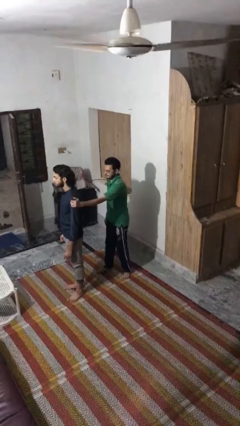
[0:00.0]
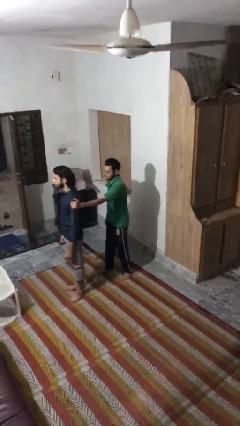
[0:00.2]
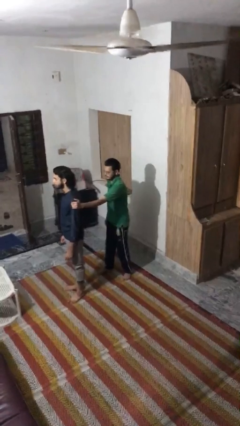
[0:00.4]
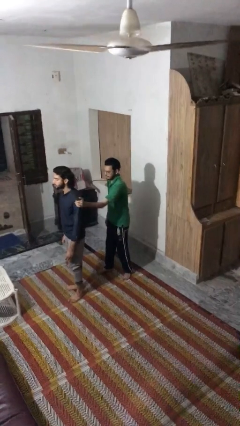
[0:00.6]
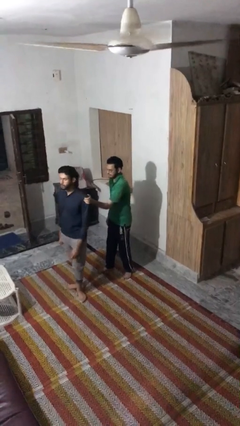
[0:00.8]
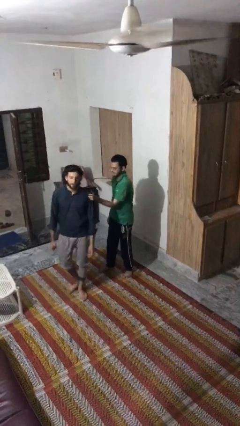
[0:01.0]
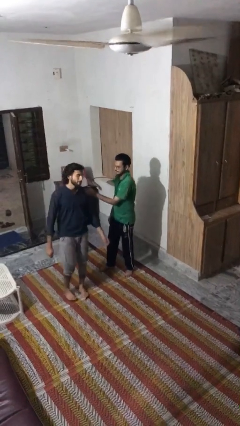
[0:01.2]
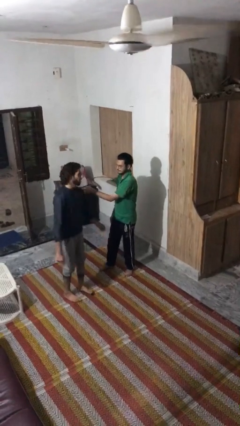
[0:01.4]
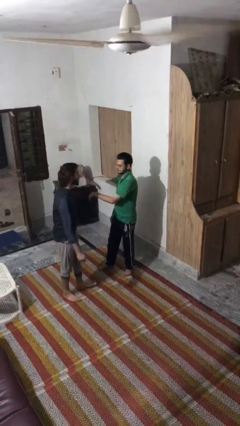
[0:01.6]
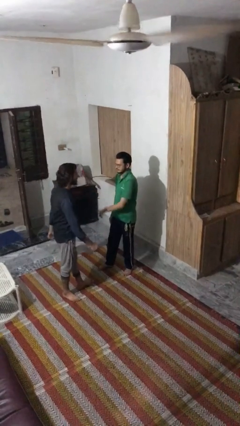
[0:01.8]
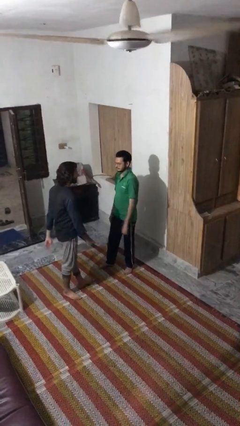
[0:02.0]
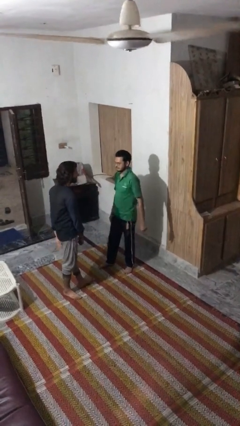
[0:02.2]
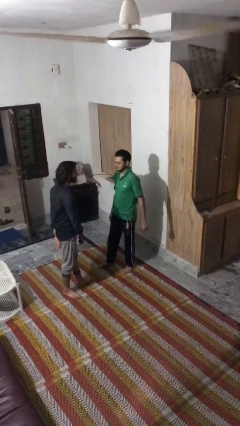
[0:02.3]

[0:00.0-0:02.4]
person spins person around

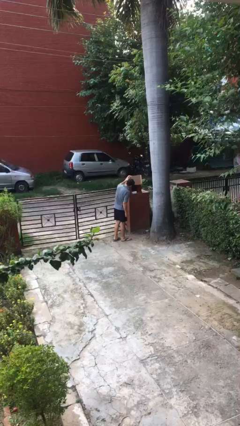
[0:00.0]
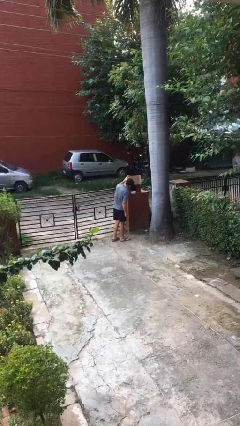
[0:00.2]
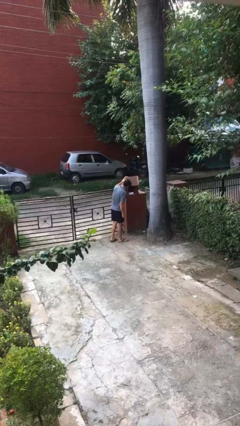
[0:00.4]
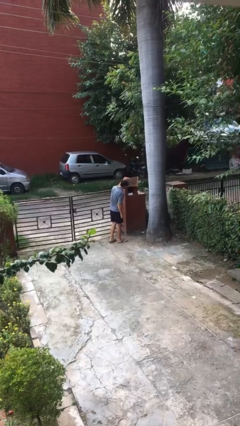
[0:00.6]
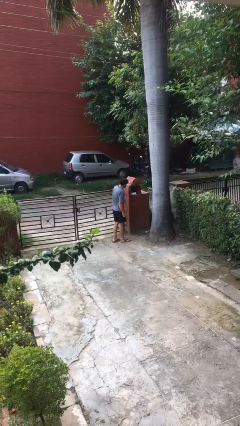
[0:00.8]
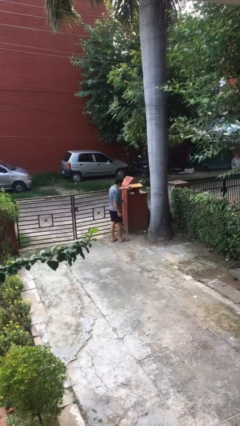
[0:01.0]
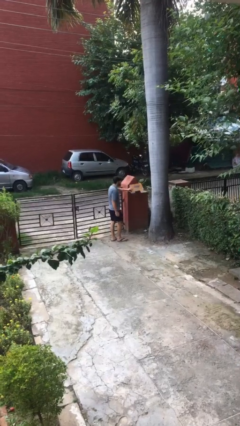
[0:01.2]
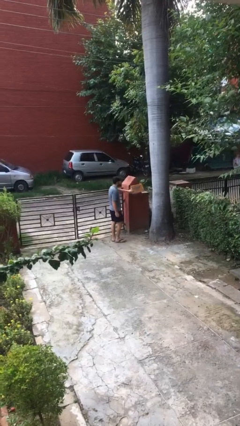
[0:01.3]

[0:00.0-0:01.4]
person closes mailbox

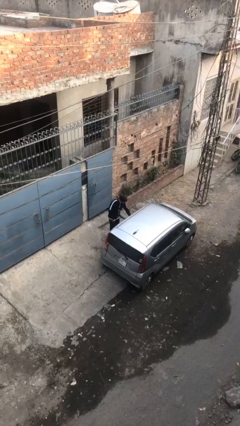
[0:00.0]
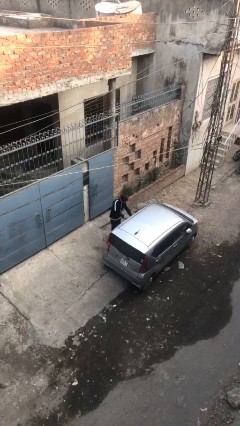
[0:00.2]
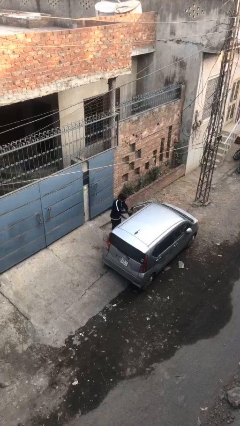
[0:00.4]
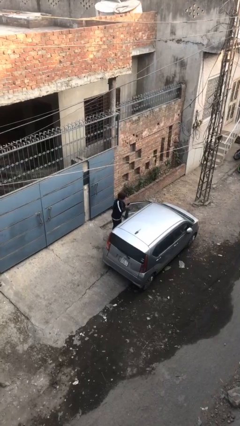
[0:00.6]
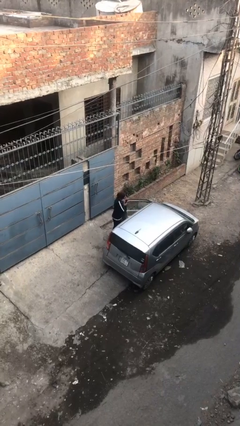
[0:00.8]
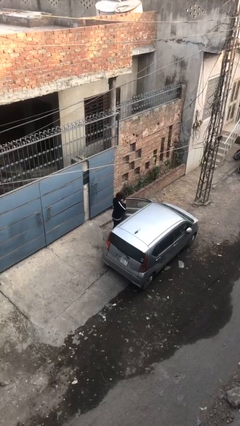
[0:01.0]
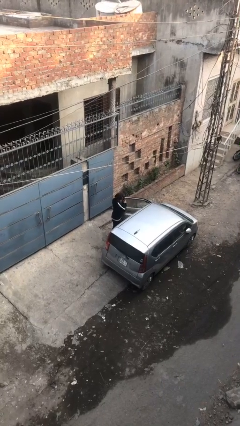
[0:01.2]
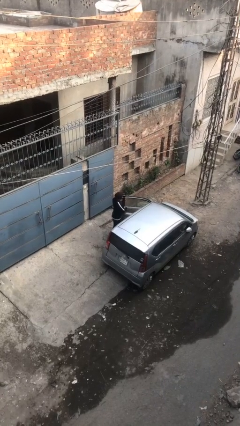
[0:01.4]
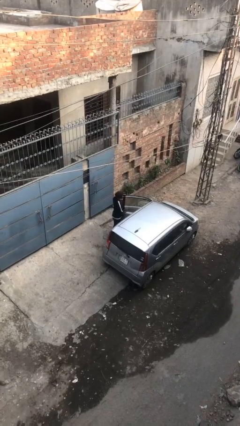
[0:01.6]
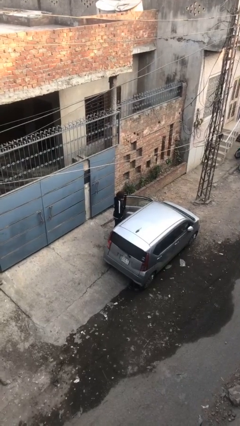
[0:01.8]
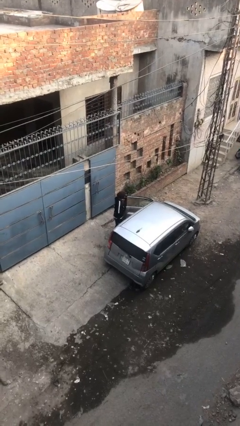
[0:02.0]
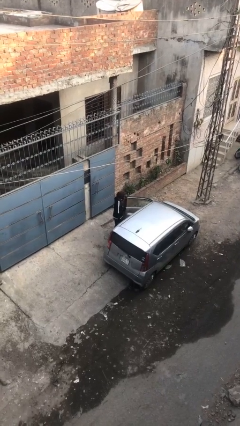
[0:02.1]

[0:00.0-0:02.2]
person opens car door

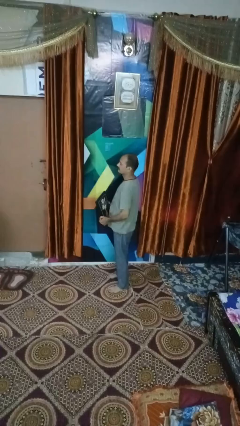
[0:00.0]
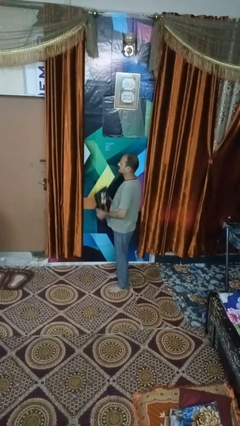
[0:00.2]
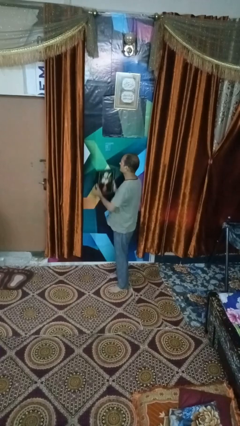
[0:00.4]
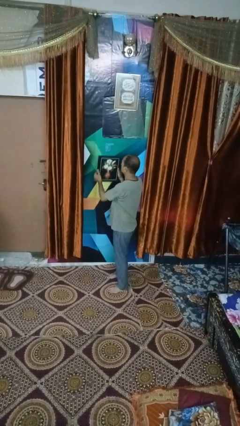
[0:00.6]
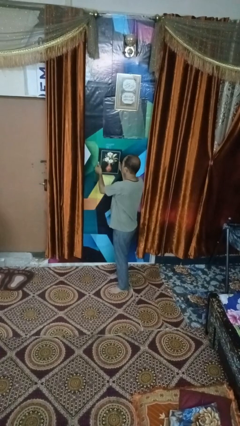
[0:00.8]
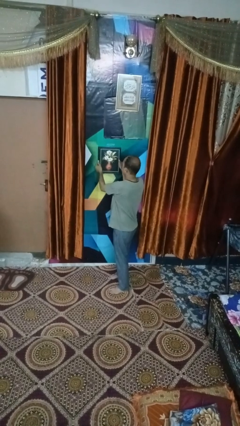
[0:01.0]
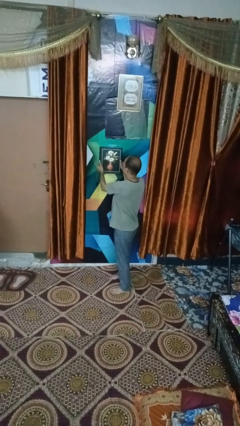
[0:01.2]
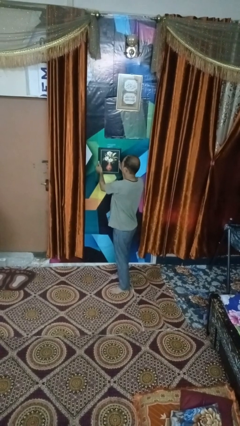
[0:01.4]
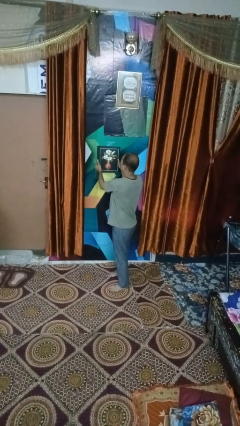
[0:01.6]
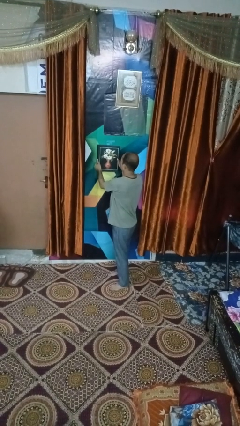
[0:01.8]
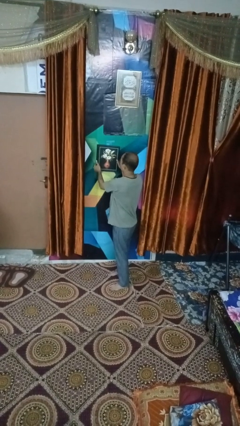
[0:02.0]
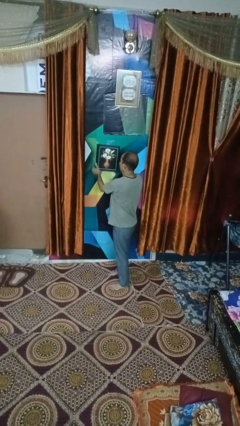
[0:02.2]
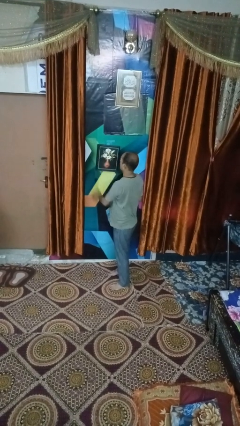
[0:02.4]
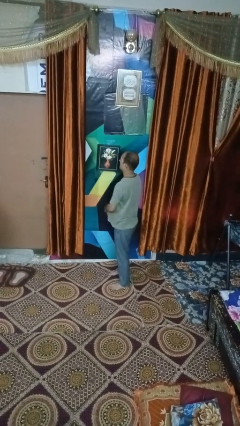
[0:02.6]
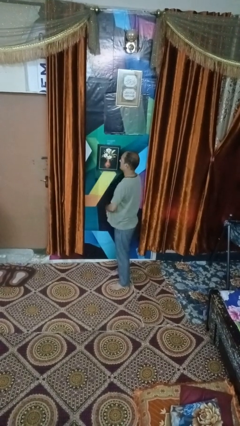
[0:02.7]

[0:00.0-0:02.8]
person puts up picture frame

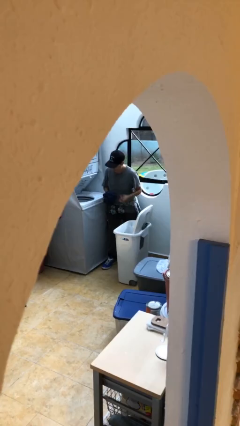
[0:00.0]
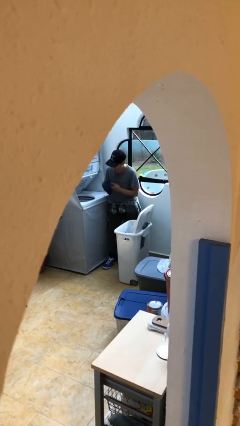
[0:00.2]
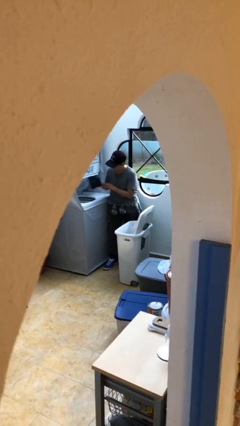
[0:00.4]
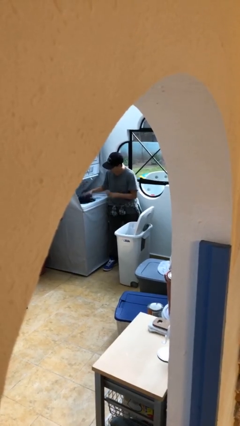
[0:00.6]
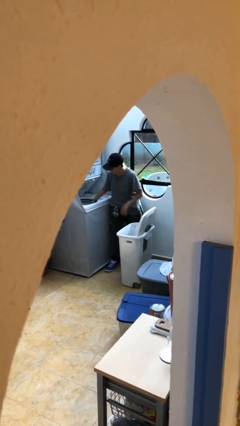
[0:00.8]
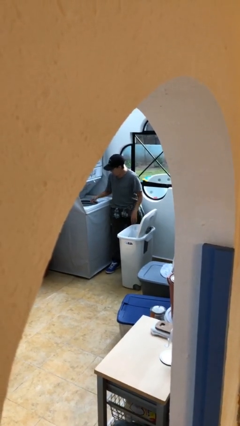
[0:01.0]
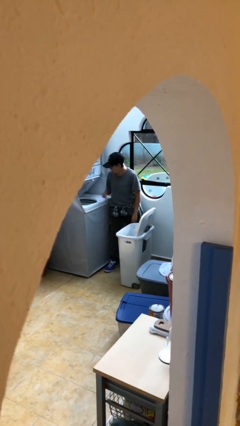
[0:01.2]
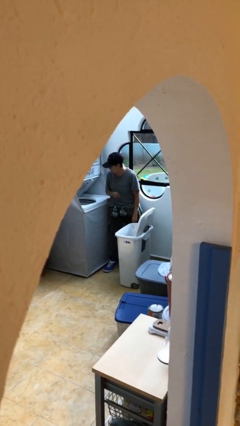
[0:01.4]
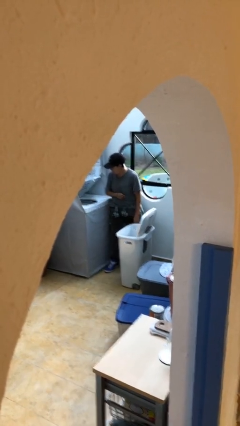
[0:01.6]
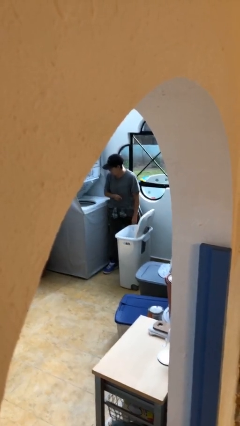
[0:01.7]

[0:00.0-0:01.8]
person loads clotheswasher

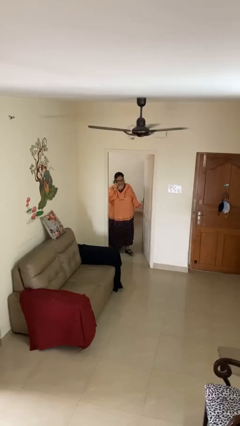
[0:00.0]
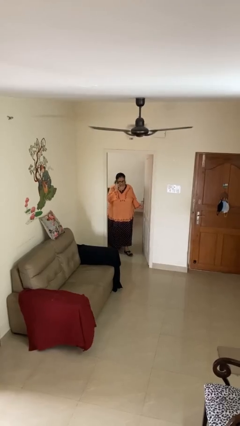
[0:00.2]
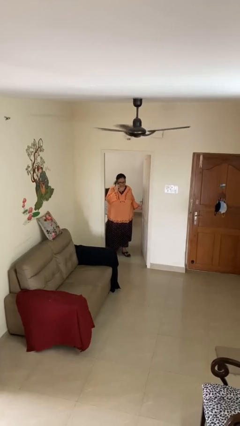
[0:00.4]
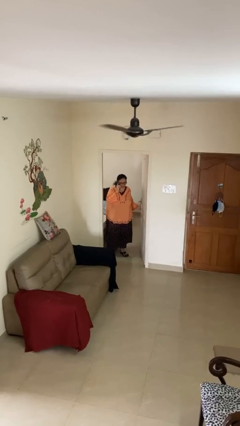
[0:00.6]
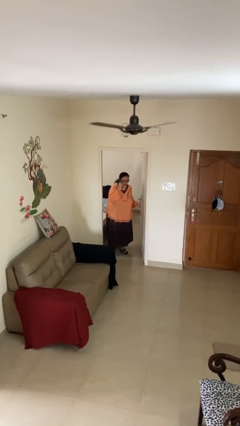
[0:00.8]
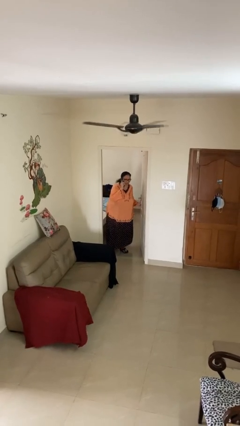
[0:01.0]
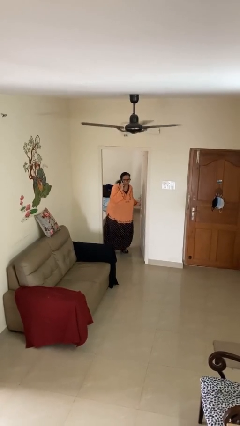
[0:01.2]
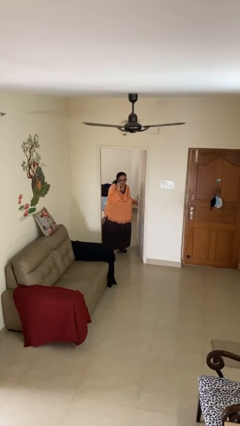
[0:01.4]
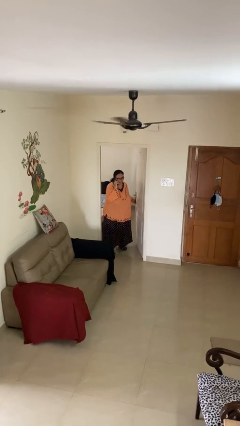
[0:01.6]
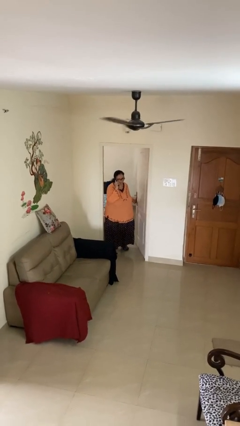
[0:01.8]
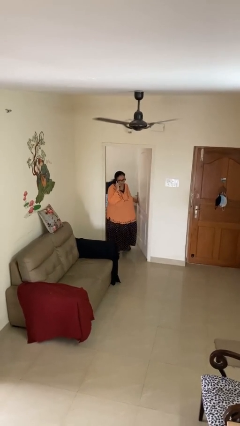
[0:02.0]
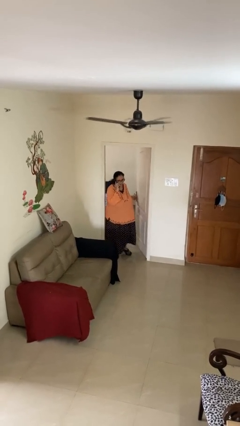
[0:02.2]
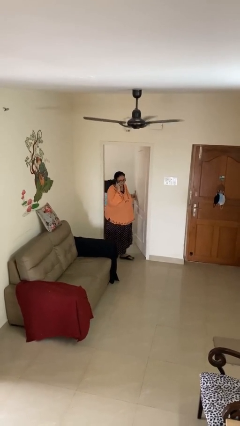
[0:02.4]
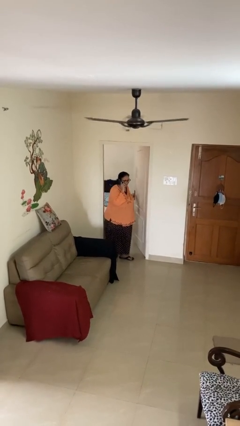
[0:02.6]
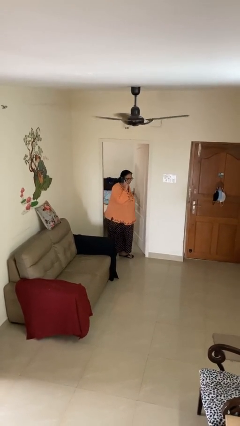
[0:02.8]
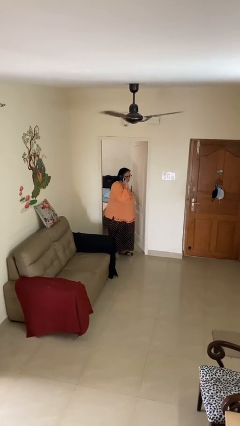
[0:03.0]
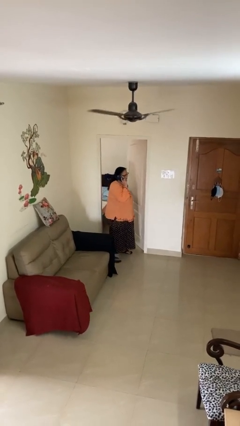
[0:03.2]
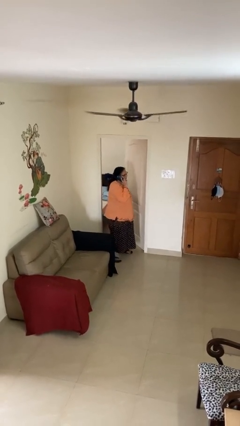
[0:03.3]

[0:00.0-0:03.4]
person enters scene through structure

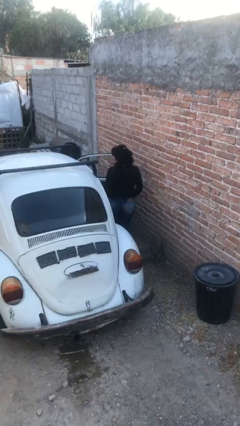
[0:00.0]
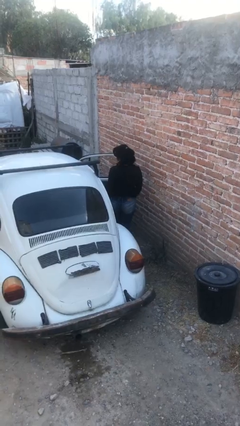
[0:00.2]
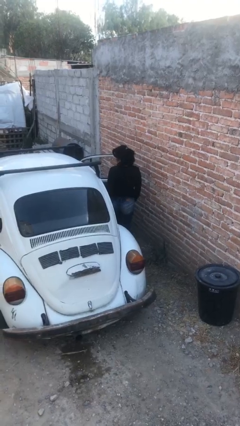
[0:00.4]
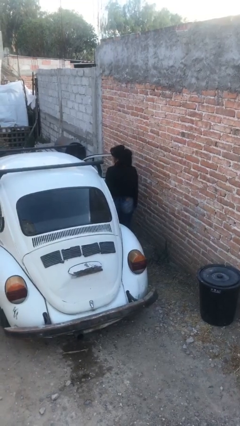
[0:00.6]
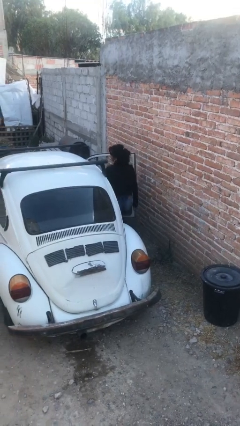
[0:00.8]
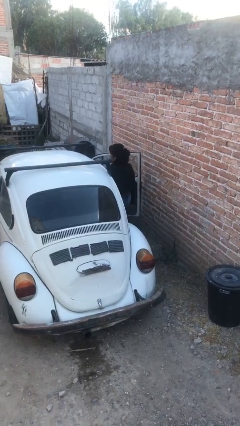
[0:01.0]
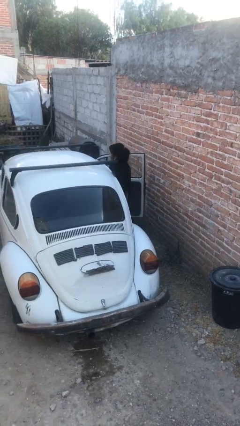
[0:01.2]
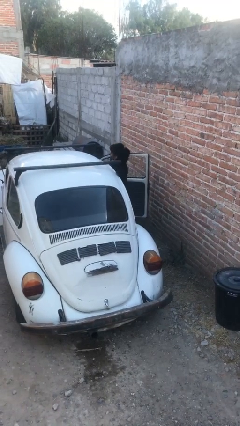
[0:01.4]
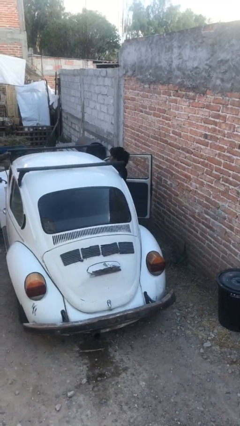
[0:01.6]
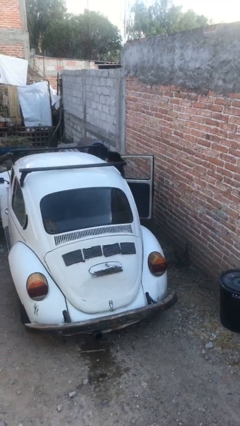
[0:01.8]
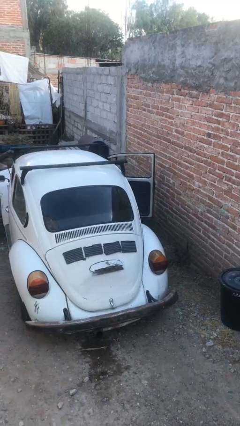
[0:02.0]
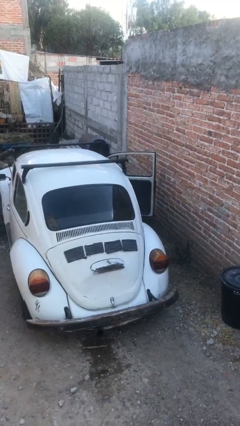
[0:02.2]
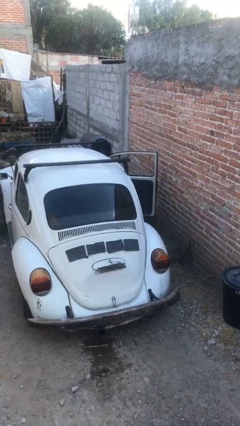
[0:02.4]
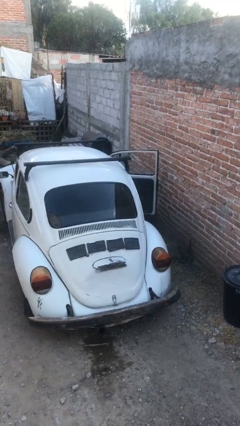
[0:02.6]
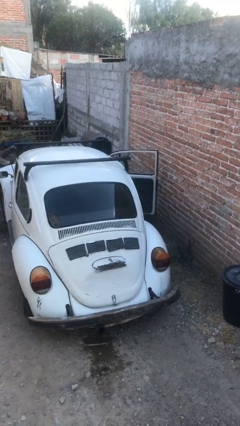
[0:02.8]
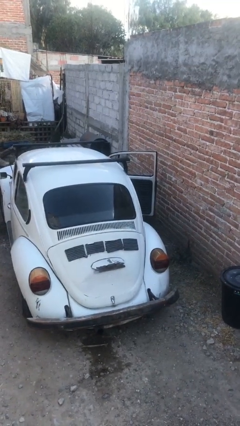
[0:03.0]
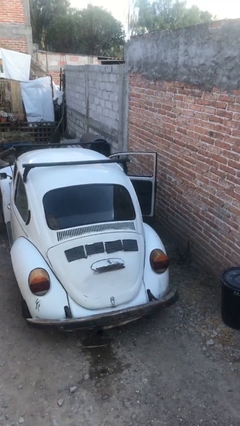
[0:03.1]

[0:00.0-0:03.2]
person enters car
